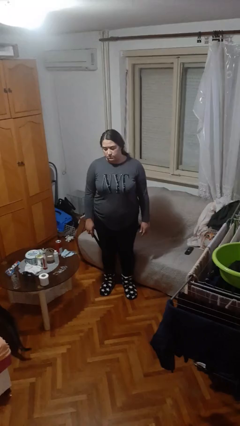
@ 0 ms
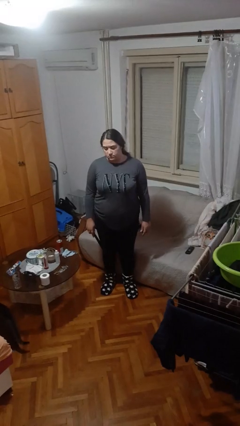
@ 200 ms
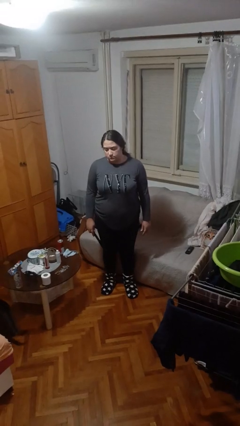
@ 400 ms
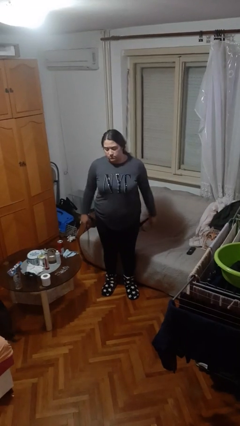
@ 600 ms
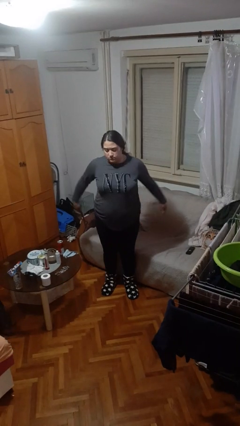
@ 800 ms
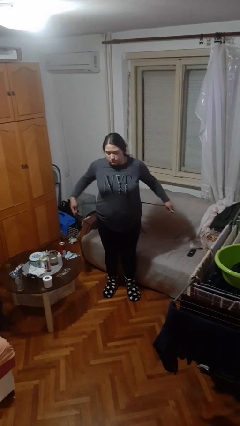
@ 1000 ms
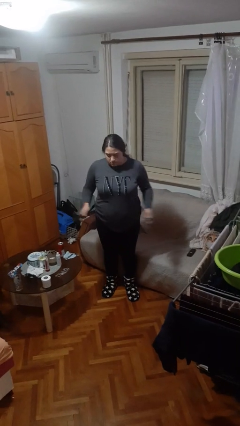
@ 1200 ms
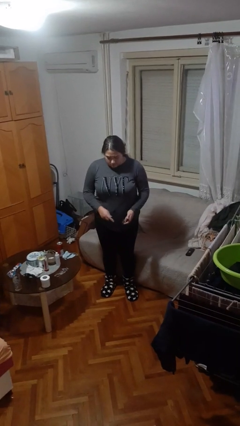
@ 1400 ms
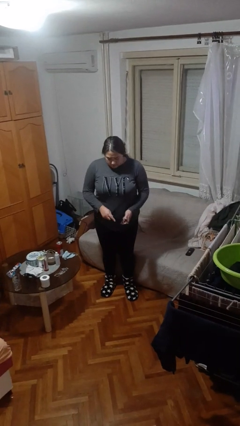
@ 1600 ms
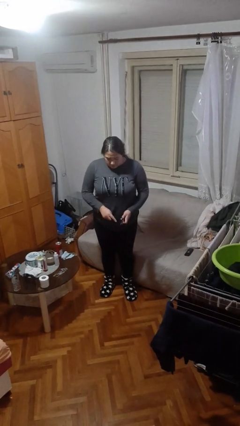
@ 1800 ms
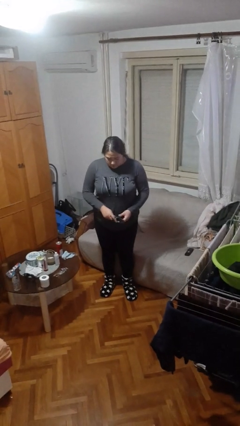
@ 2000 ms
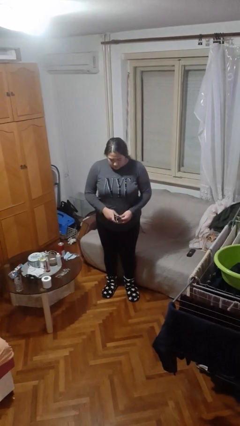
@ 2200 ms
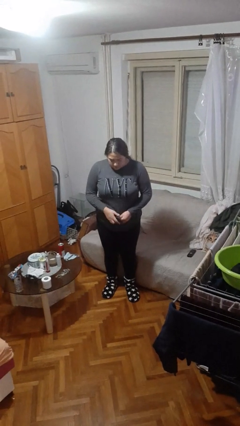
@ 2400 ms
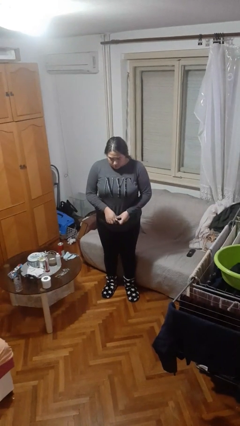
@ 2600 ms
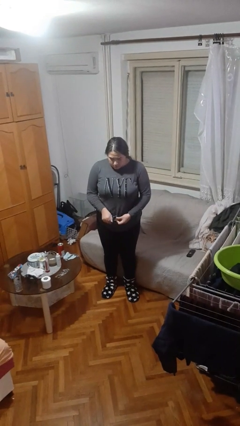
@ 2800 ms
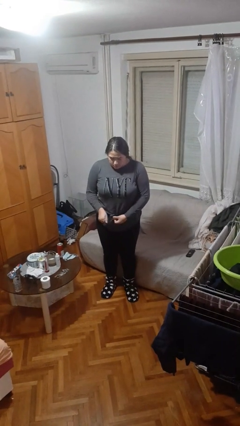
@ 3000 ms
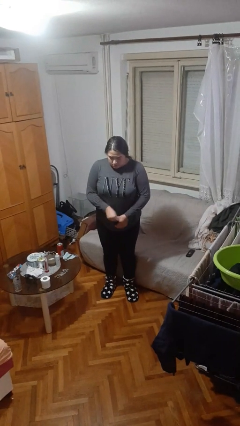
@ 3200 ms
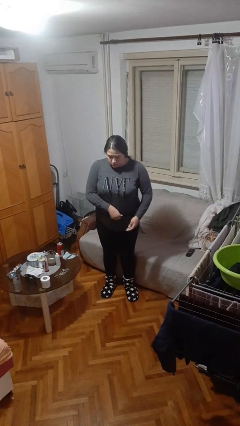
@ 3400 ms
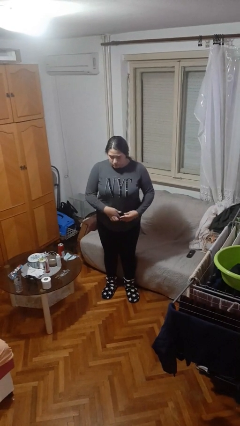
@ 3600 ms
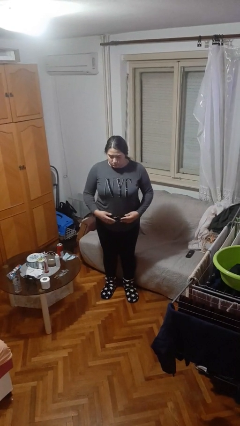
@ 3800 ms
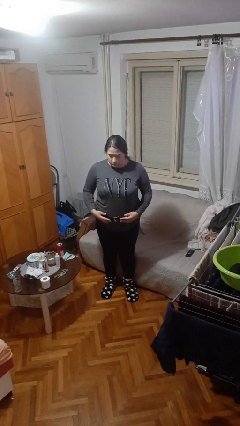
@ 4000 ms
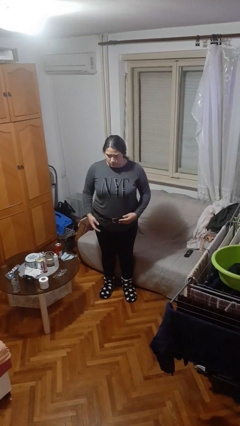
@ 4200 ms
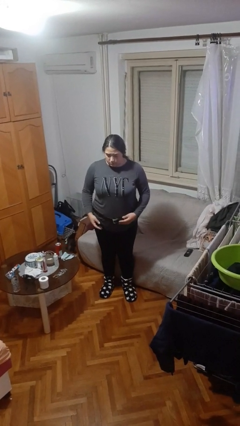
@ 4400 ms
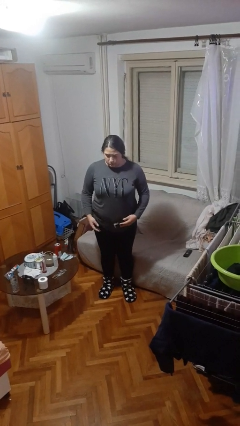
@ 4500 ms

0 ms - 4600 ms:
person puts on belt

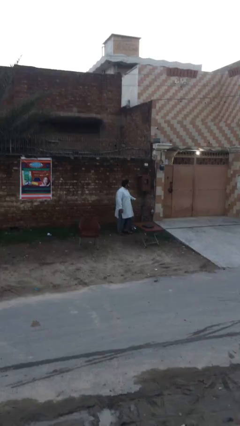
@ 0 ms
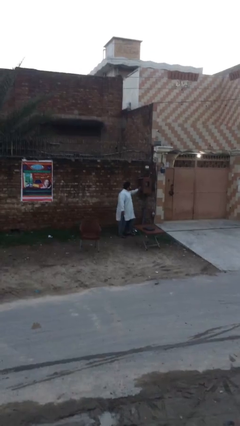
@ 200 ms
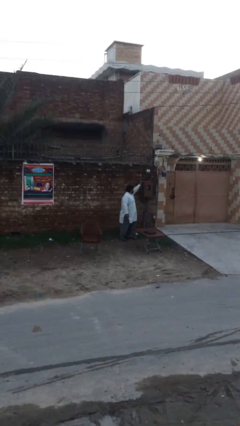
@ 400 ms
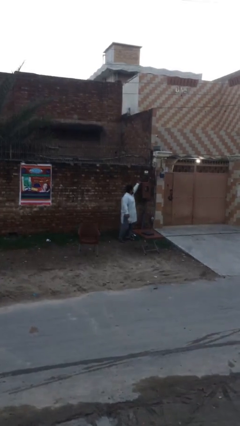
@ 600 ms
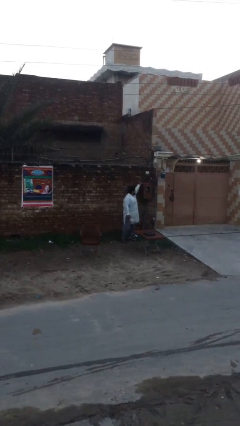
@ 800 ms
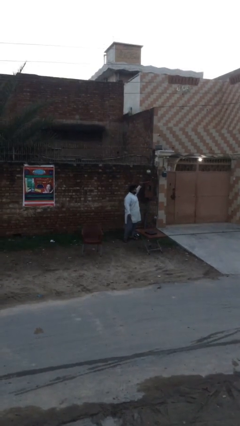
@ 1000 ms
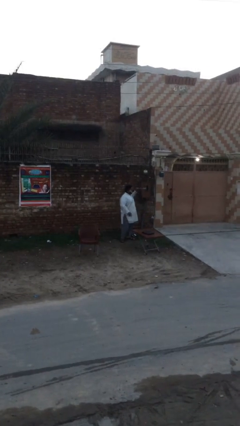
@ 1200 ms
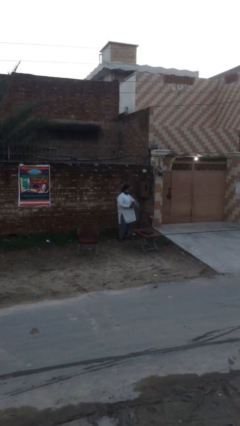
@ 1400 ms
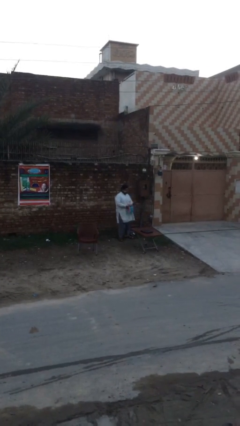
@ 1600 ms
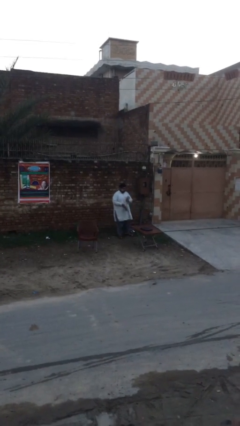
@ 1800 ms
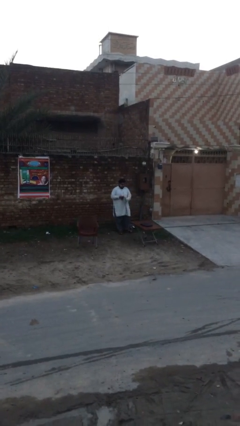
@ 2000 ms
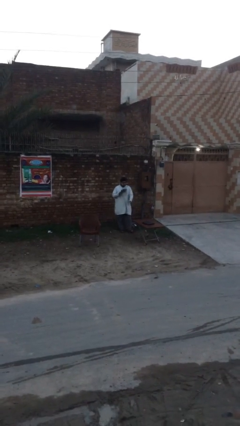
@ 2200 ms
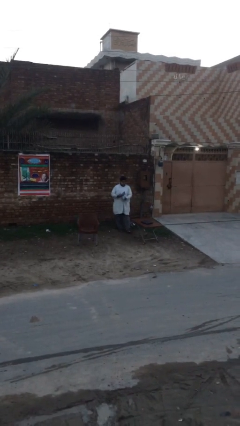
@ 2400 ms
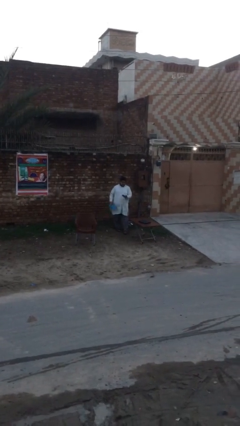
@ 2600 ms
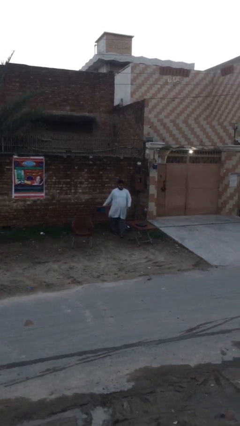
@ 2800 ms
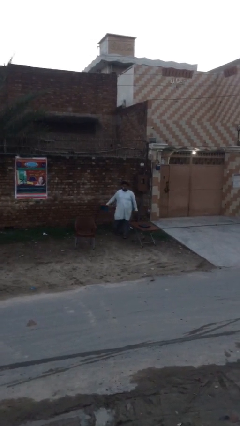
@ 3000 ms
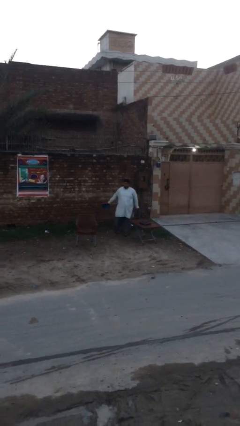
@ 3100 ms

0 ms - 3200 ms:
person picks up object from shelf

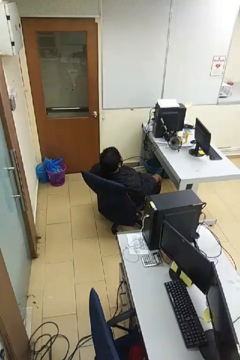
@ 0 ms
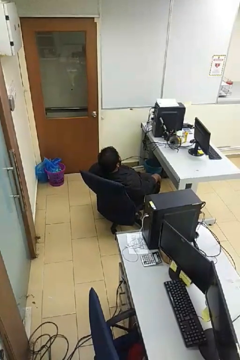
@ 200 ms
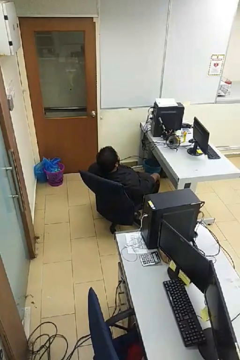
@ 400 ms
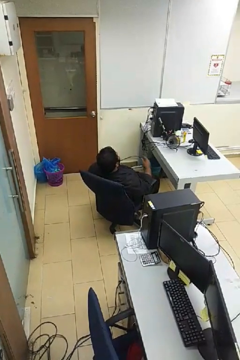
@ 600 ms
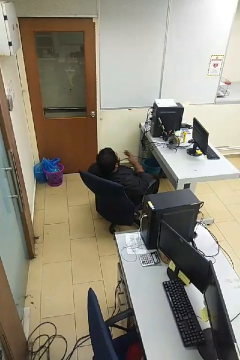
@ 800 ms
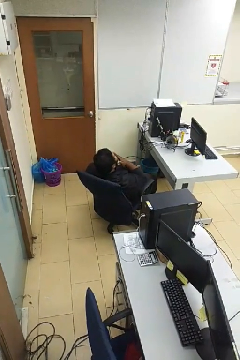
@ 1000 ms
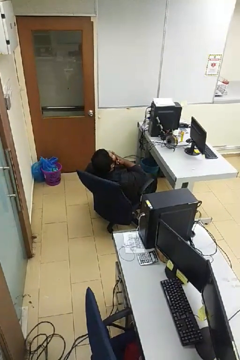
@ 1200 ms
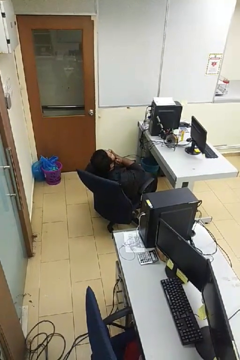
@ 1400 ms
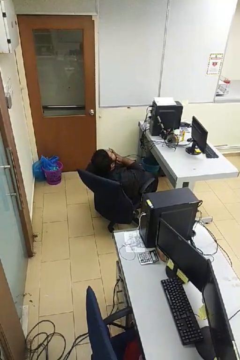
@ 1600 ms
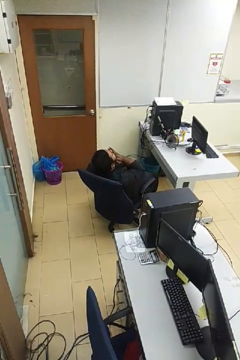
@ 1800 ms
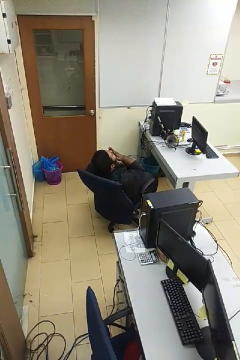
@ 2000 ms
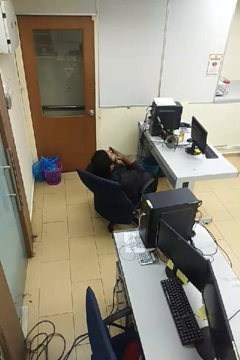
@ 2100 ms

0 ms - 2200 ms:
person yawns

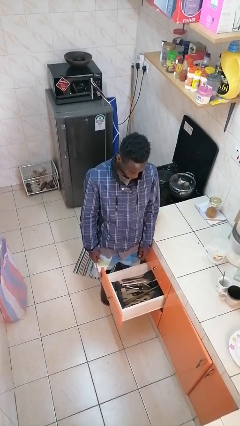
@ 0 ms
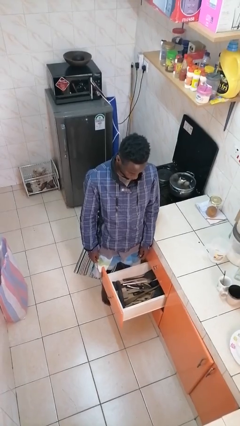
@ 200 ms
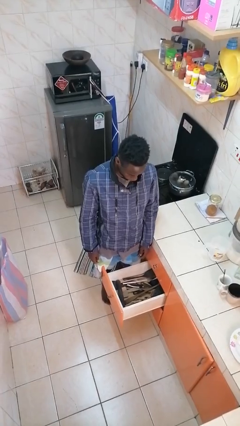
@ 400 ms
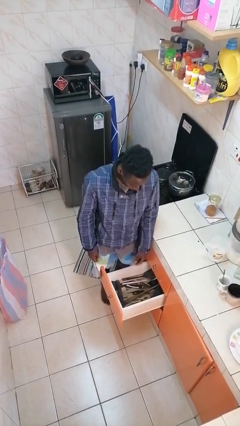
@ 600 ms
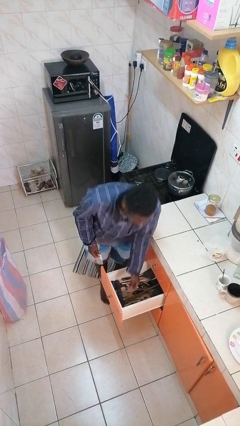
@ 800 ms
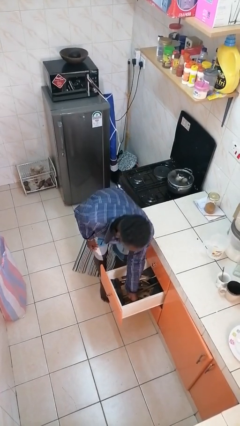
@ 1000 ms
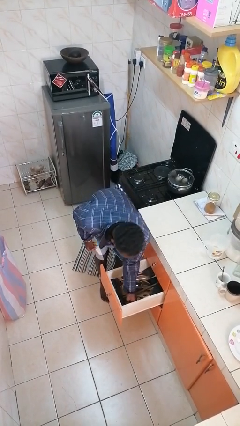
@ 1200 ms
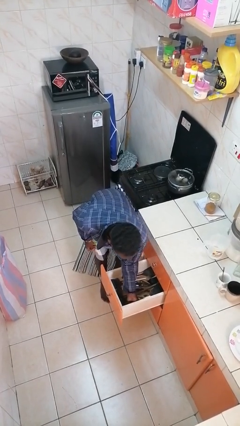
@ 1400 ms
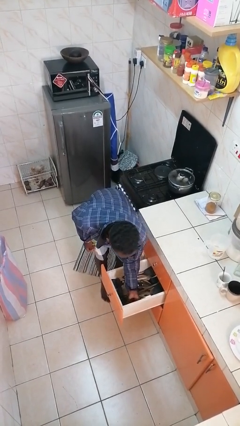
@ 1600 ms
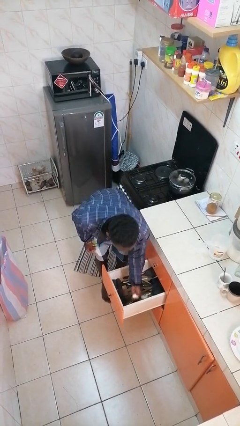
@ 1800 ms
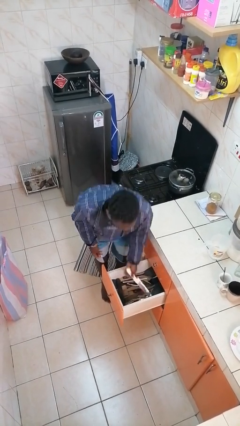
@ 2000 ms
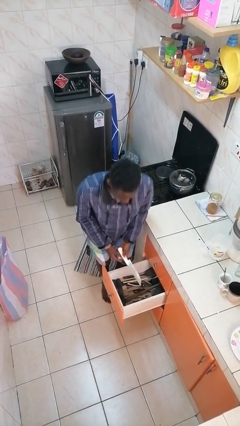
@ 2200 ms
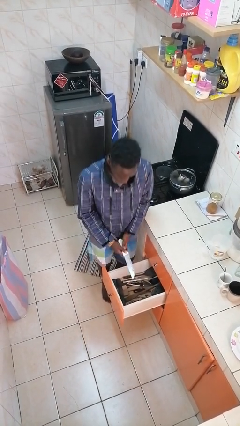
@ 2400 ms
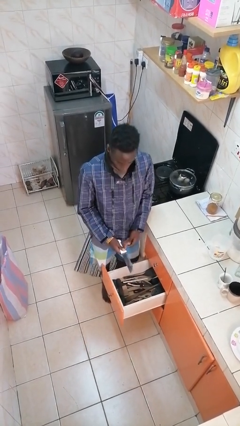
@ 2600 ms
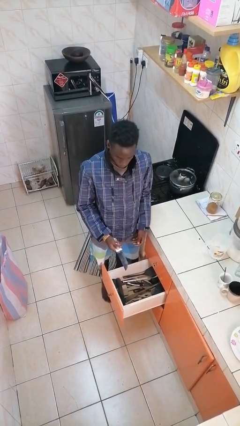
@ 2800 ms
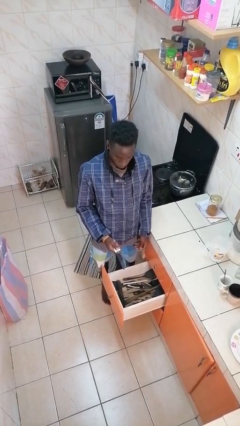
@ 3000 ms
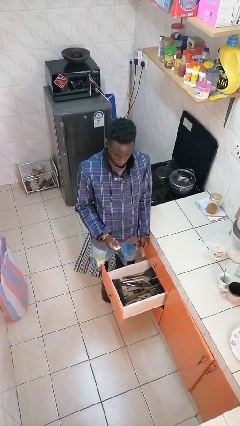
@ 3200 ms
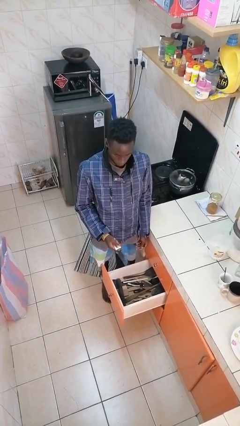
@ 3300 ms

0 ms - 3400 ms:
person takes object from kitchen drawer

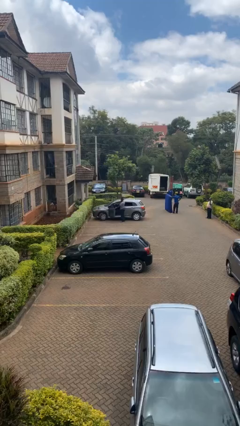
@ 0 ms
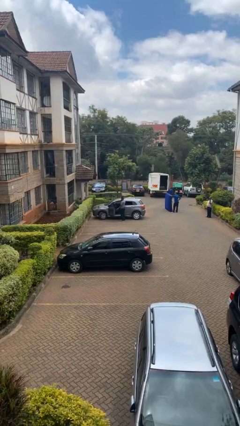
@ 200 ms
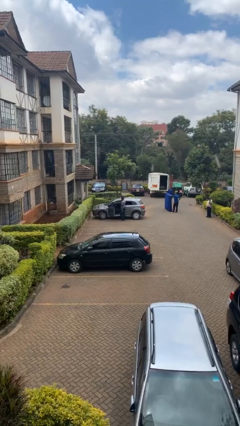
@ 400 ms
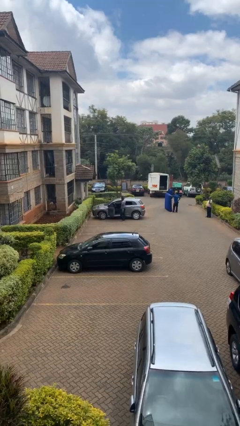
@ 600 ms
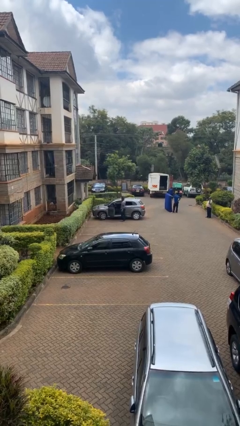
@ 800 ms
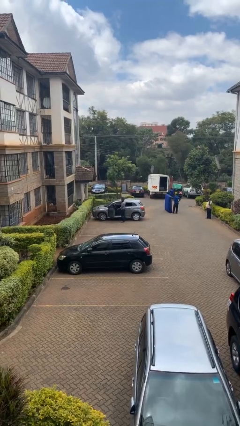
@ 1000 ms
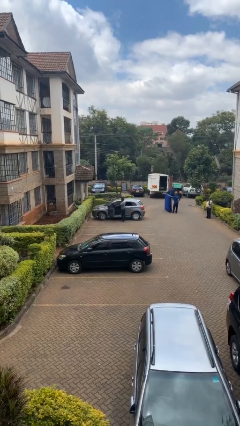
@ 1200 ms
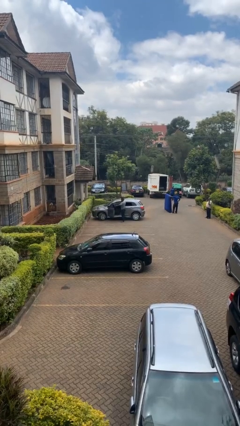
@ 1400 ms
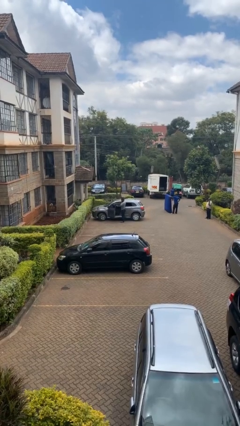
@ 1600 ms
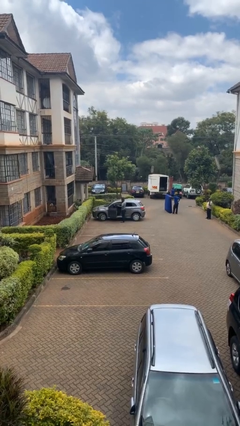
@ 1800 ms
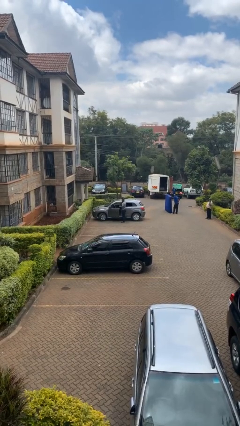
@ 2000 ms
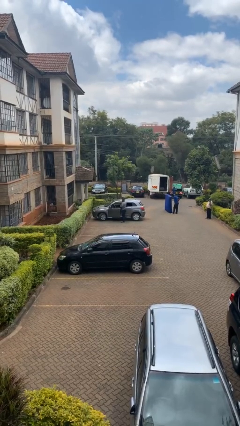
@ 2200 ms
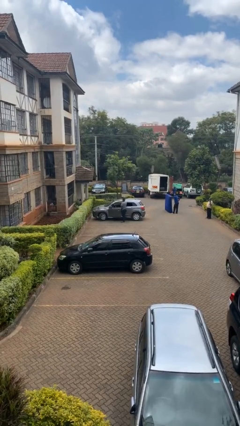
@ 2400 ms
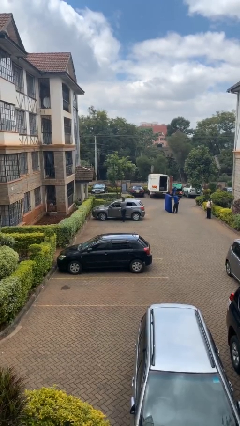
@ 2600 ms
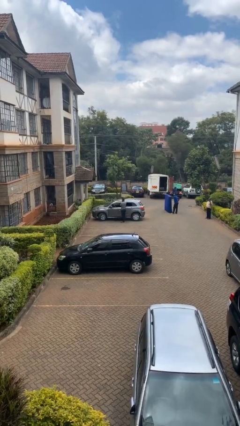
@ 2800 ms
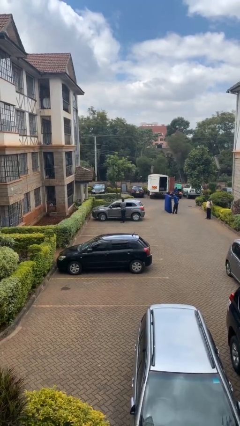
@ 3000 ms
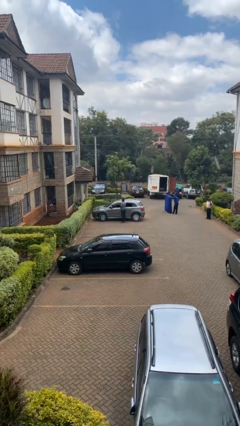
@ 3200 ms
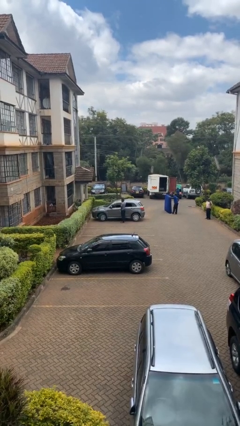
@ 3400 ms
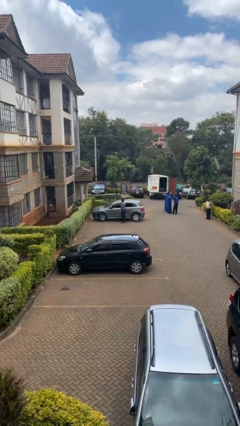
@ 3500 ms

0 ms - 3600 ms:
person closes car door

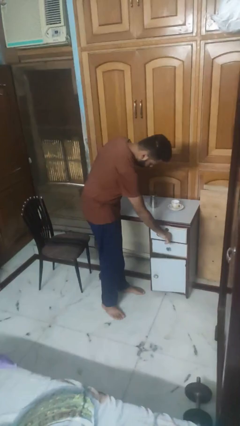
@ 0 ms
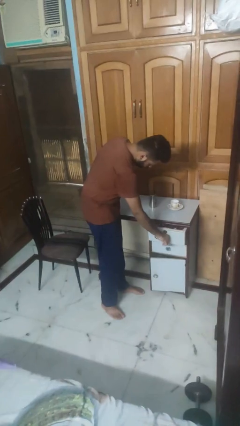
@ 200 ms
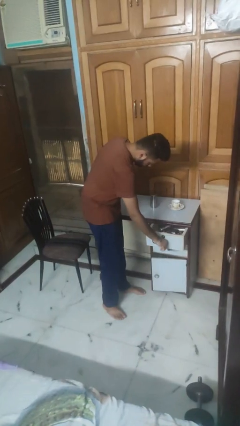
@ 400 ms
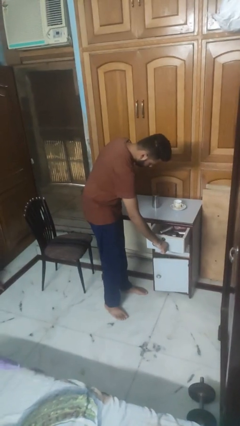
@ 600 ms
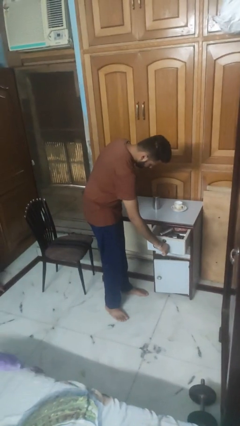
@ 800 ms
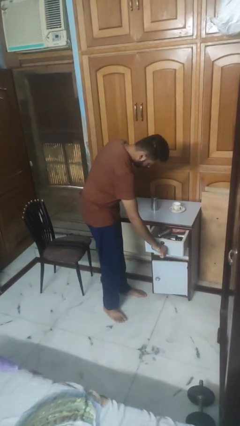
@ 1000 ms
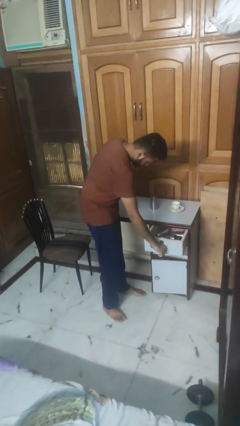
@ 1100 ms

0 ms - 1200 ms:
person opens kitchen drawer
